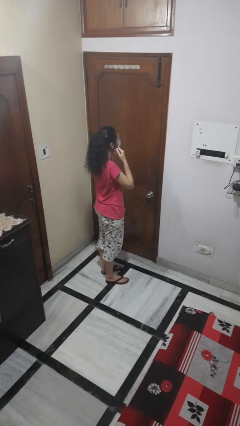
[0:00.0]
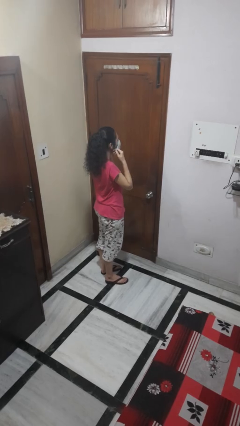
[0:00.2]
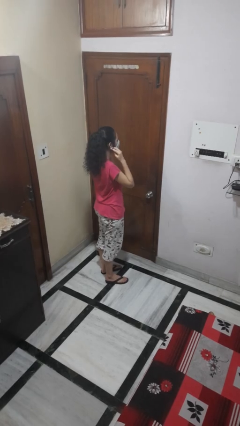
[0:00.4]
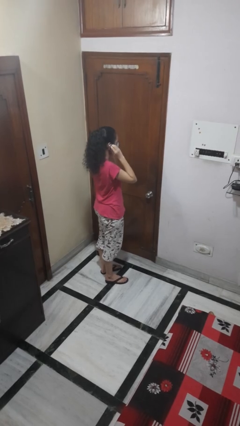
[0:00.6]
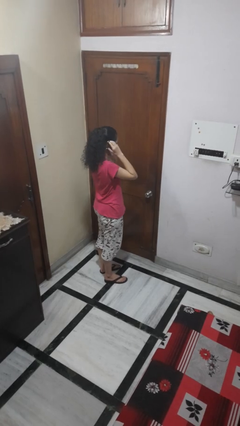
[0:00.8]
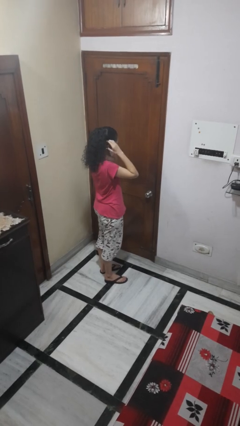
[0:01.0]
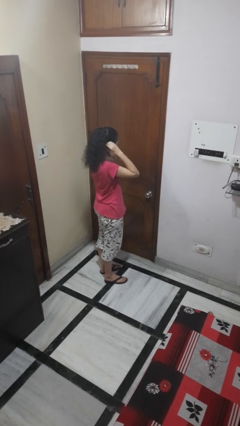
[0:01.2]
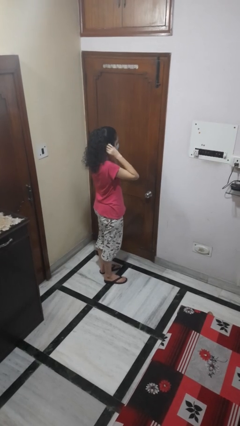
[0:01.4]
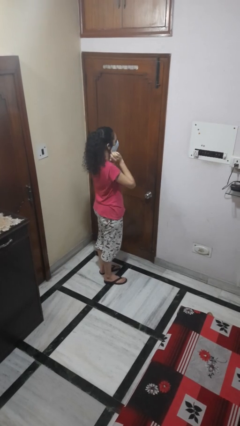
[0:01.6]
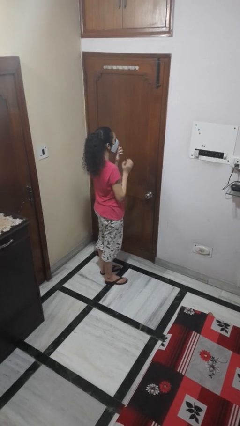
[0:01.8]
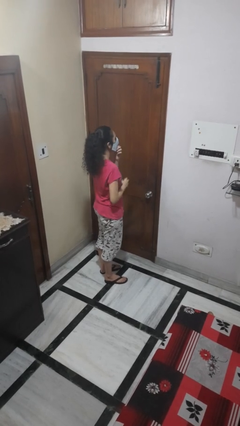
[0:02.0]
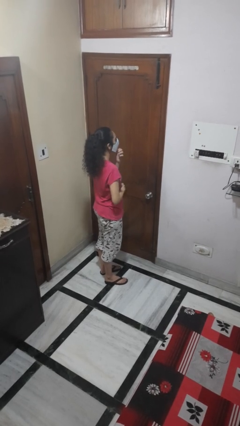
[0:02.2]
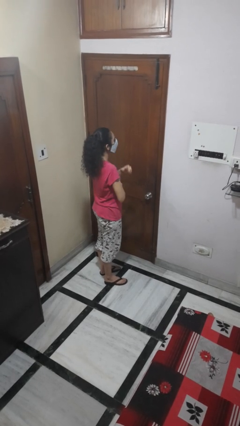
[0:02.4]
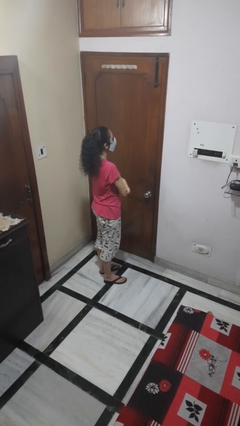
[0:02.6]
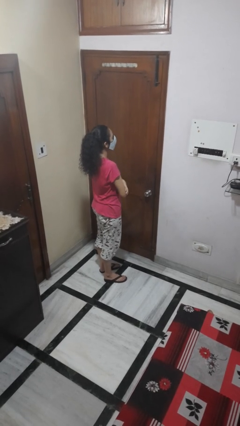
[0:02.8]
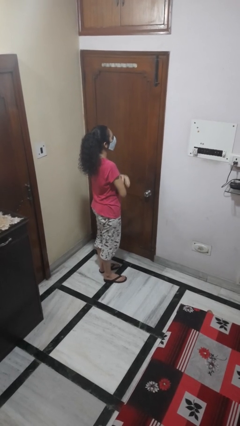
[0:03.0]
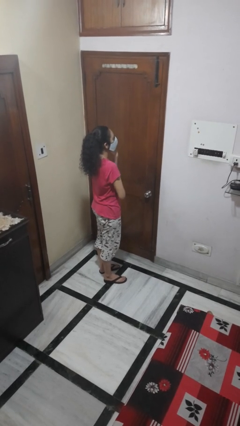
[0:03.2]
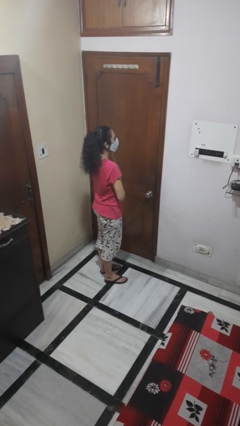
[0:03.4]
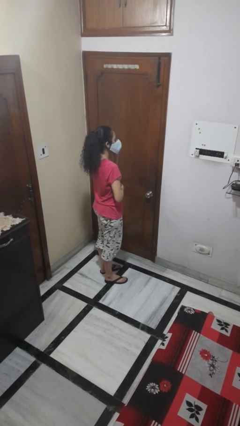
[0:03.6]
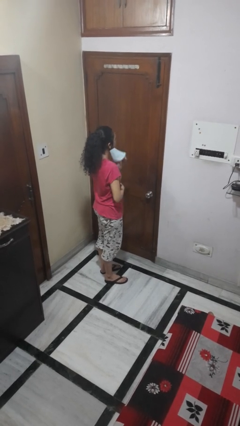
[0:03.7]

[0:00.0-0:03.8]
person puts on facemask

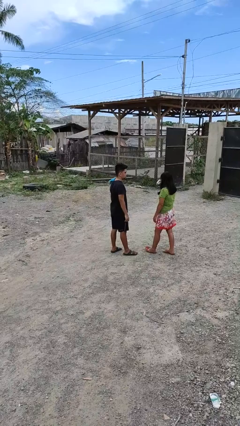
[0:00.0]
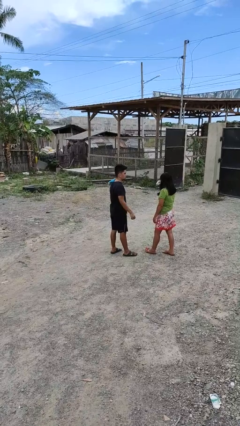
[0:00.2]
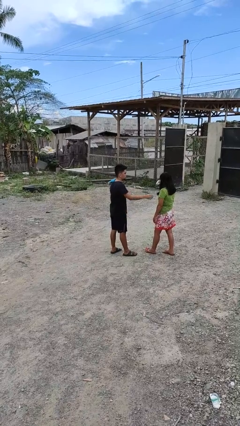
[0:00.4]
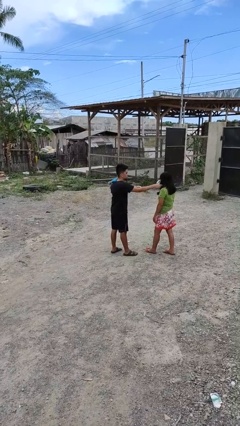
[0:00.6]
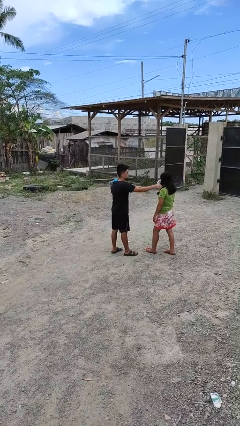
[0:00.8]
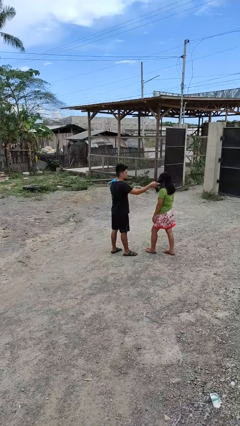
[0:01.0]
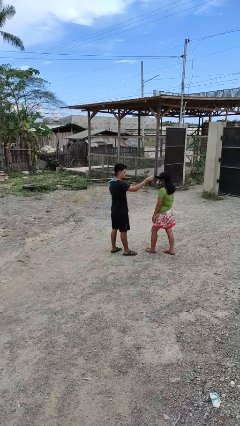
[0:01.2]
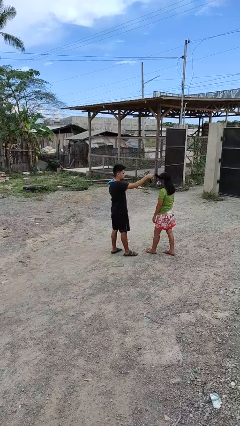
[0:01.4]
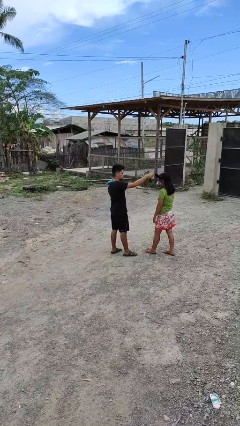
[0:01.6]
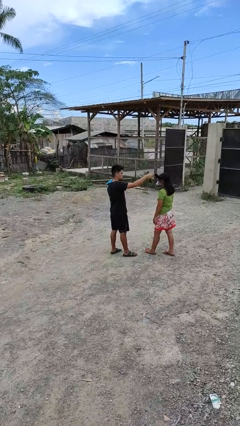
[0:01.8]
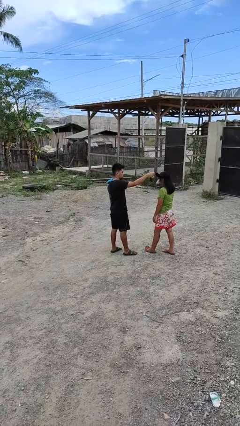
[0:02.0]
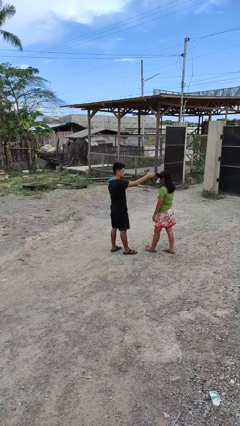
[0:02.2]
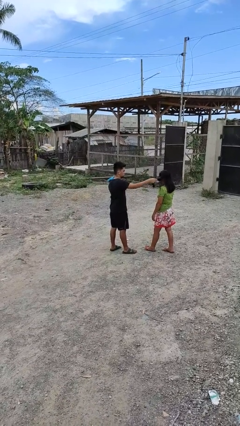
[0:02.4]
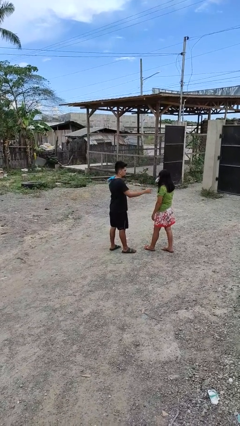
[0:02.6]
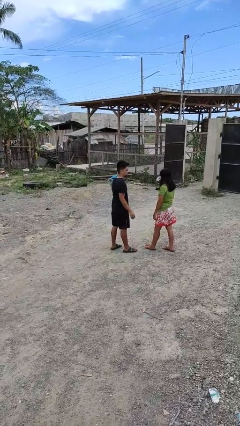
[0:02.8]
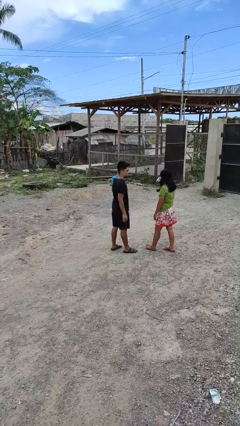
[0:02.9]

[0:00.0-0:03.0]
person grabs person by hair

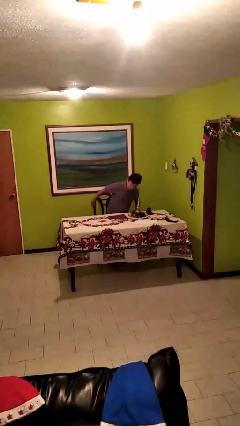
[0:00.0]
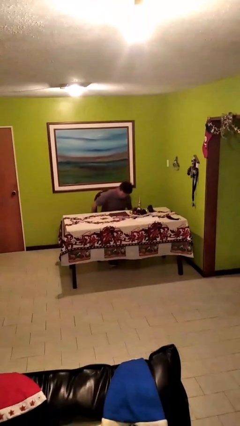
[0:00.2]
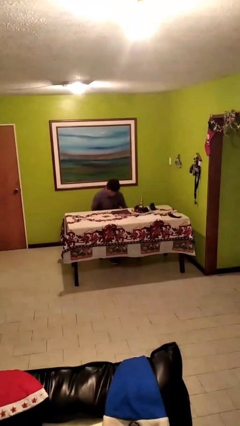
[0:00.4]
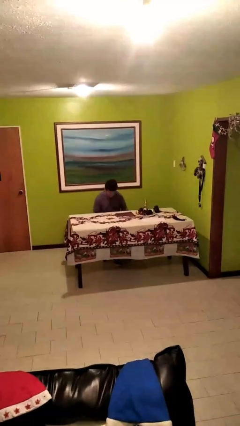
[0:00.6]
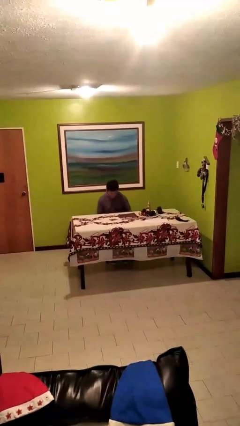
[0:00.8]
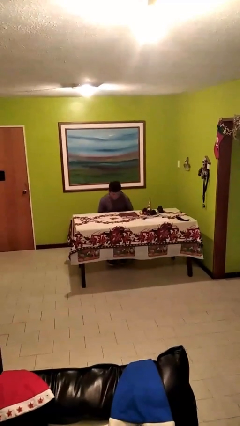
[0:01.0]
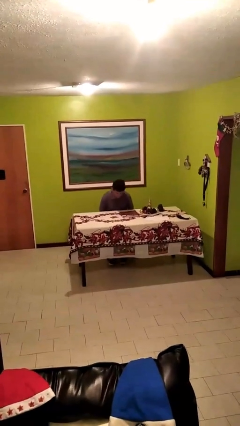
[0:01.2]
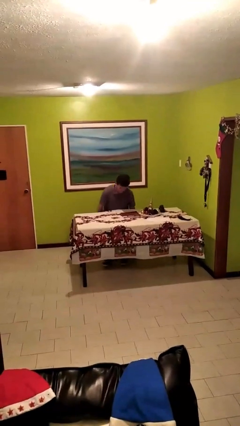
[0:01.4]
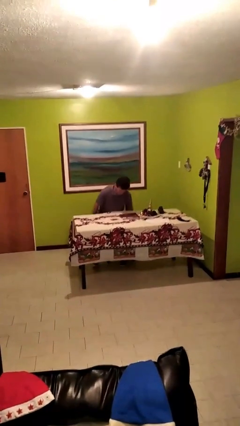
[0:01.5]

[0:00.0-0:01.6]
person sits down

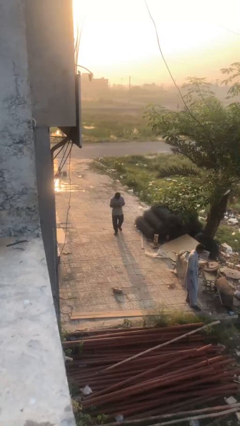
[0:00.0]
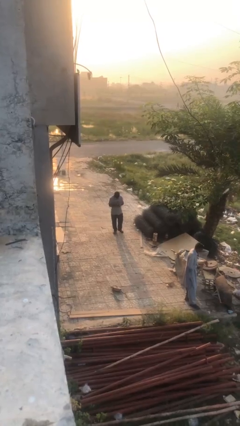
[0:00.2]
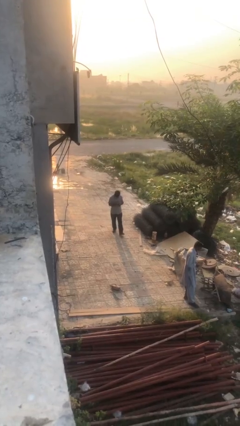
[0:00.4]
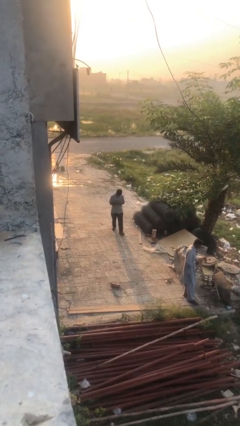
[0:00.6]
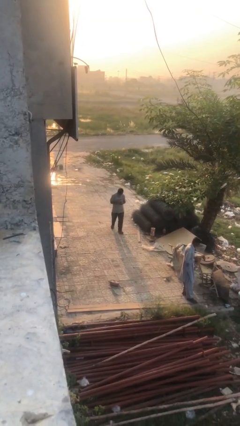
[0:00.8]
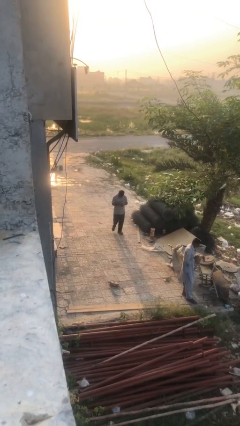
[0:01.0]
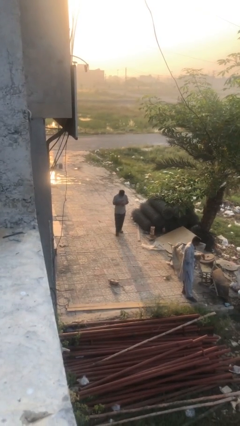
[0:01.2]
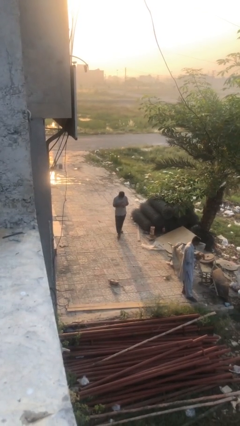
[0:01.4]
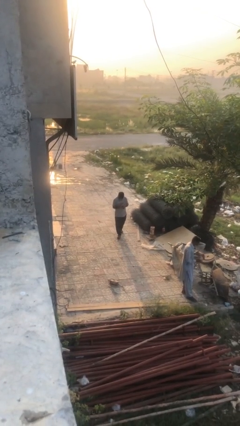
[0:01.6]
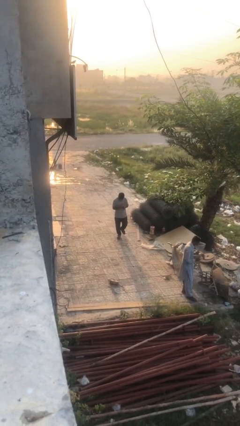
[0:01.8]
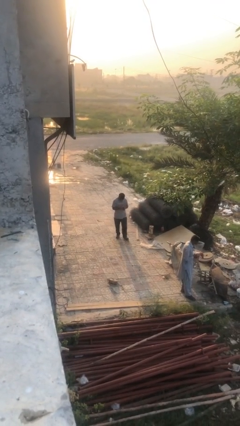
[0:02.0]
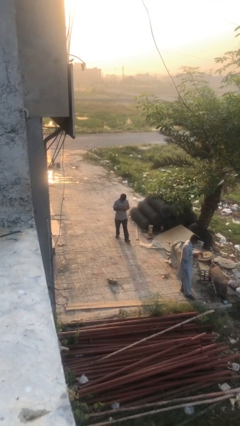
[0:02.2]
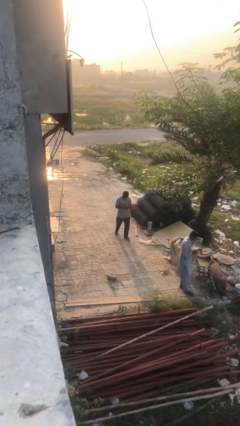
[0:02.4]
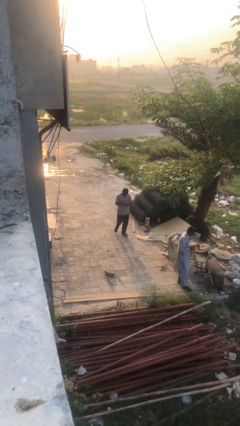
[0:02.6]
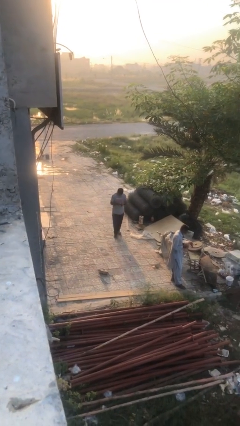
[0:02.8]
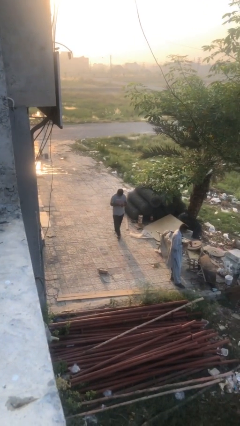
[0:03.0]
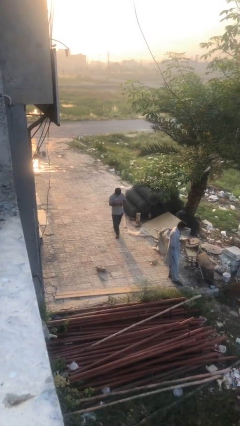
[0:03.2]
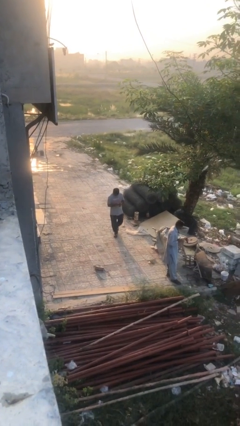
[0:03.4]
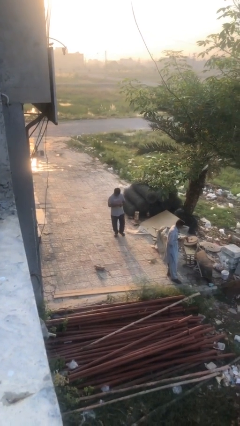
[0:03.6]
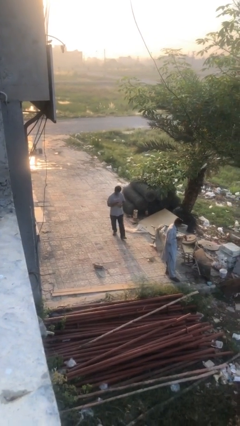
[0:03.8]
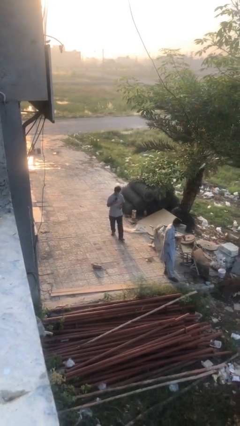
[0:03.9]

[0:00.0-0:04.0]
person texts on phone

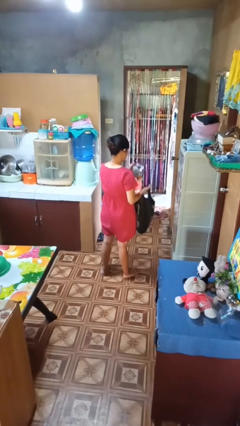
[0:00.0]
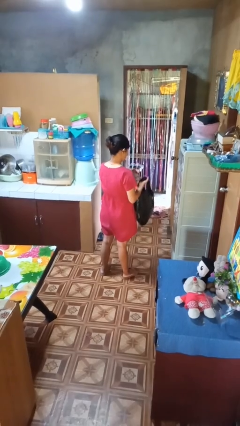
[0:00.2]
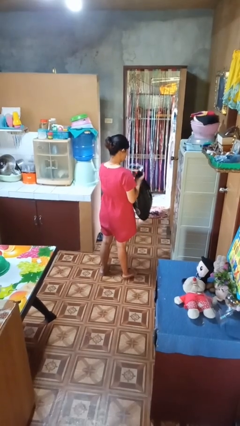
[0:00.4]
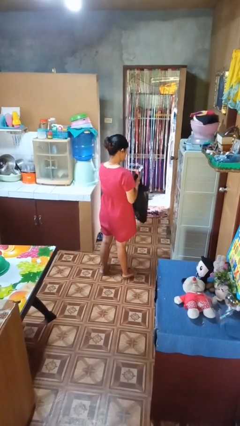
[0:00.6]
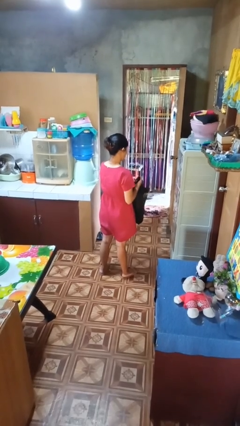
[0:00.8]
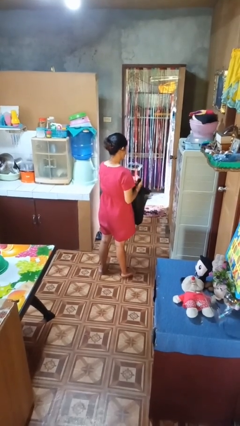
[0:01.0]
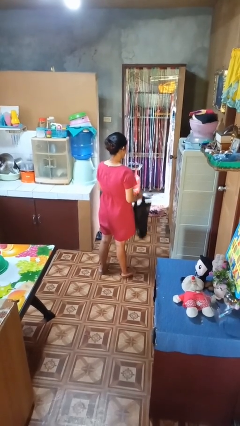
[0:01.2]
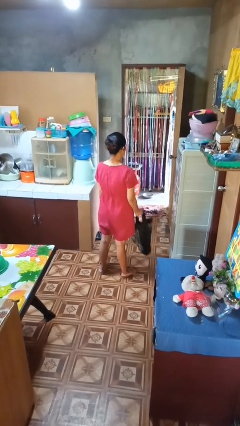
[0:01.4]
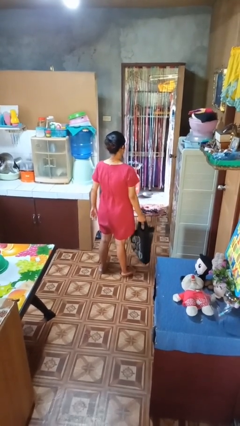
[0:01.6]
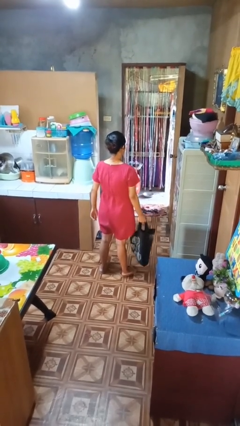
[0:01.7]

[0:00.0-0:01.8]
person puts object into bag

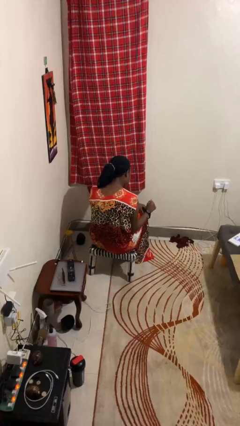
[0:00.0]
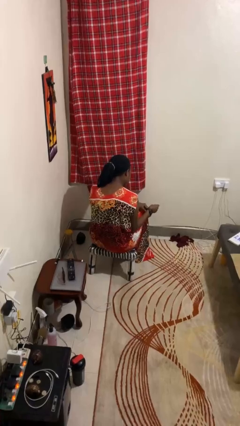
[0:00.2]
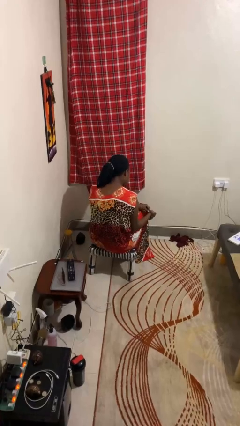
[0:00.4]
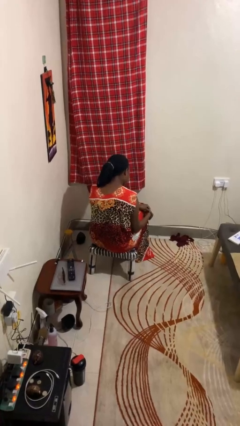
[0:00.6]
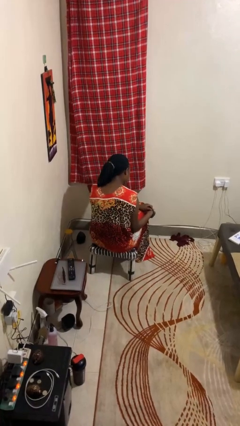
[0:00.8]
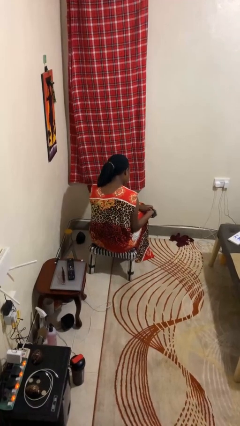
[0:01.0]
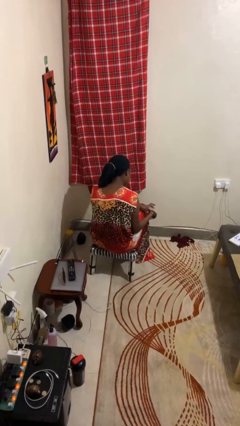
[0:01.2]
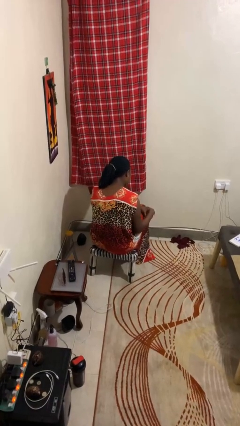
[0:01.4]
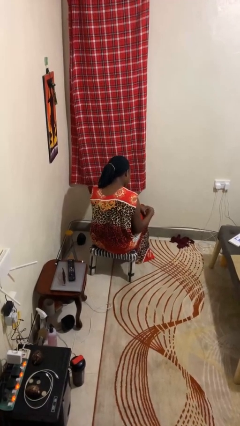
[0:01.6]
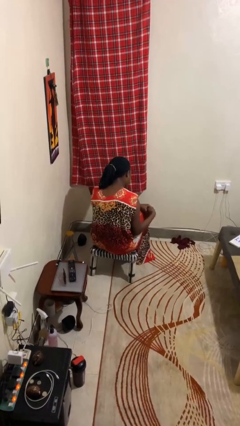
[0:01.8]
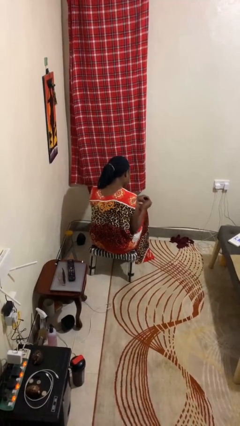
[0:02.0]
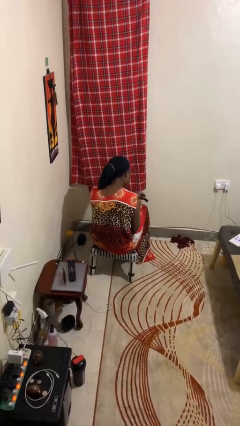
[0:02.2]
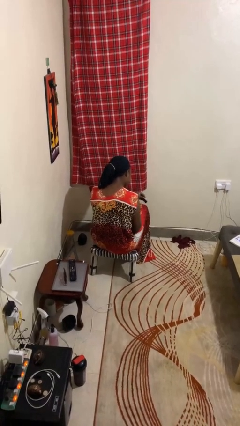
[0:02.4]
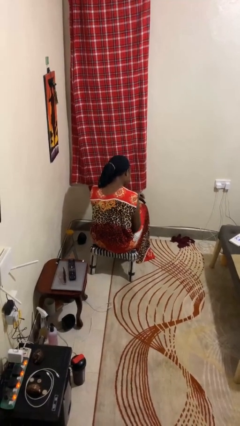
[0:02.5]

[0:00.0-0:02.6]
person takes off wristwatch
